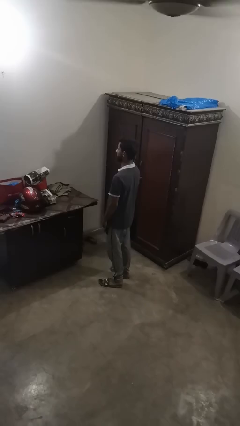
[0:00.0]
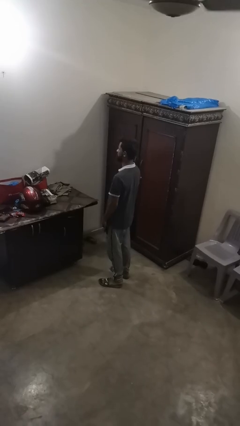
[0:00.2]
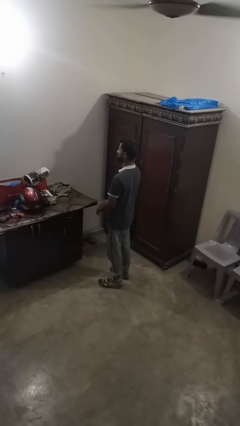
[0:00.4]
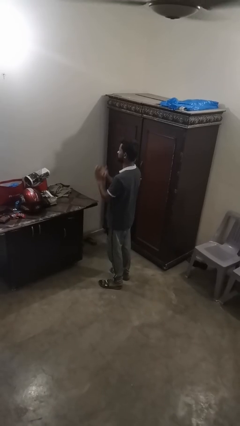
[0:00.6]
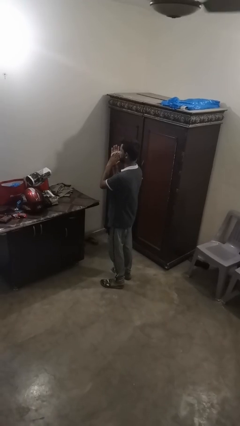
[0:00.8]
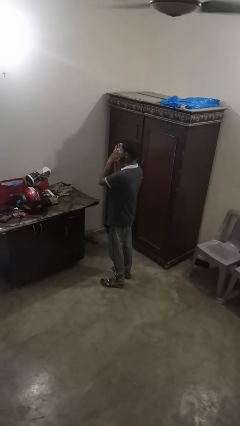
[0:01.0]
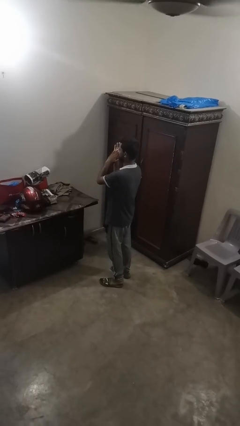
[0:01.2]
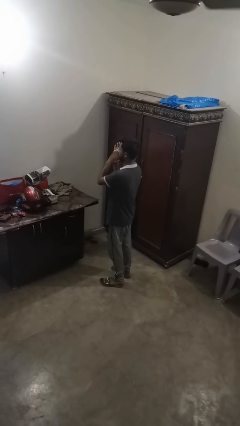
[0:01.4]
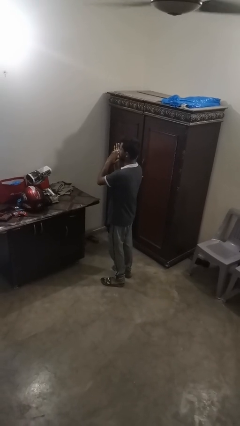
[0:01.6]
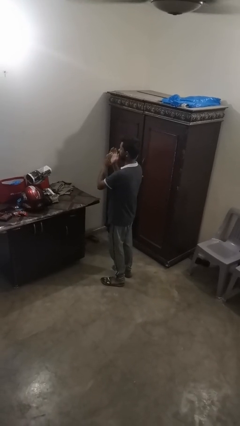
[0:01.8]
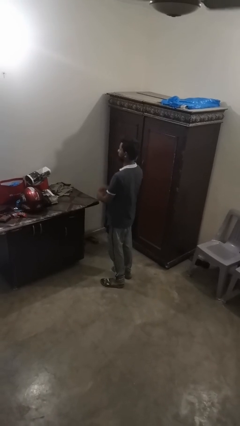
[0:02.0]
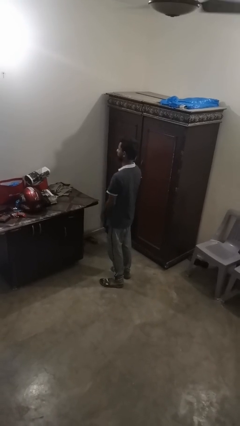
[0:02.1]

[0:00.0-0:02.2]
person claps hands

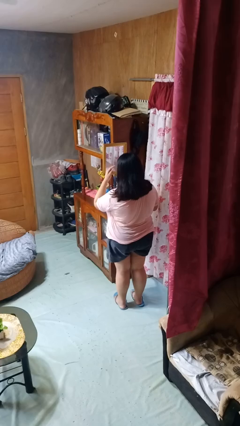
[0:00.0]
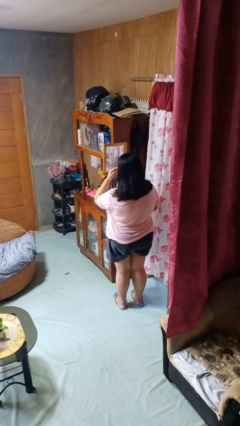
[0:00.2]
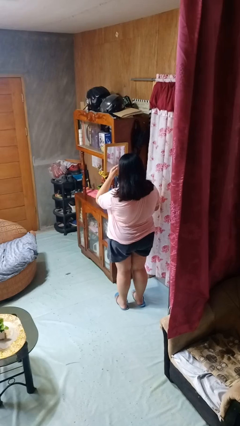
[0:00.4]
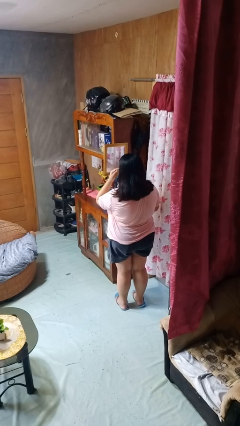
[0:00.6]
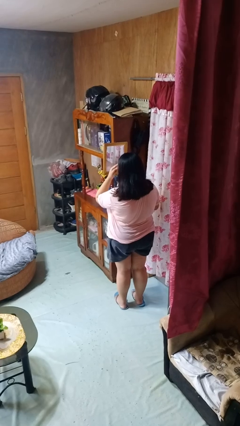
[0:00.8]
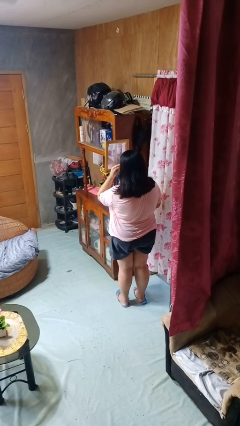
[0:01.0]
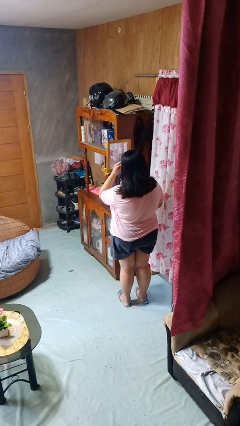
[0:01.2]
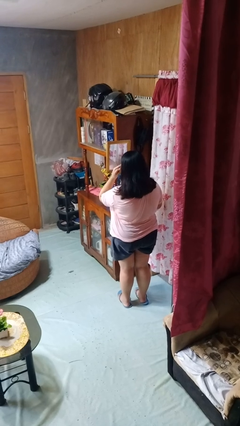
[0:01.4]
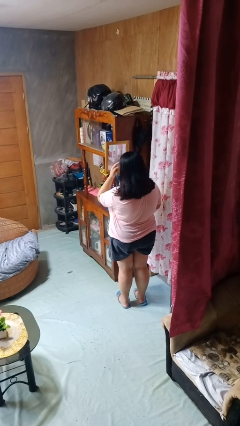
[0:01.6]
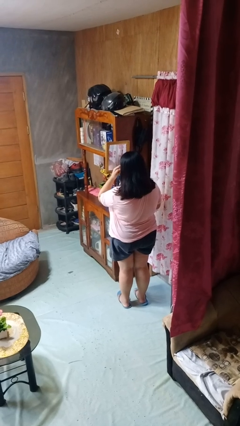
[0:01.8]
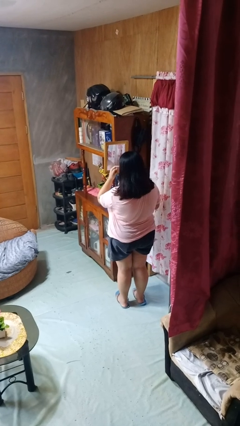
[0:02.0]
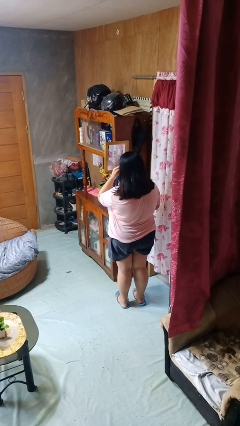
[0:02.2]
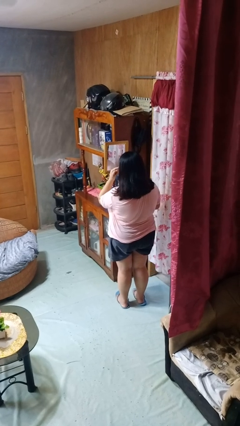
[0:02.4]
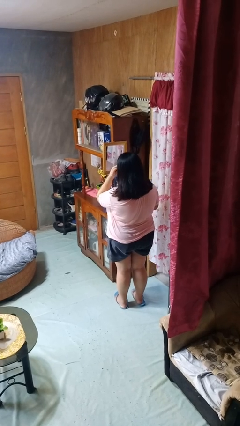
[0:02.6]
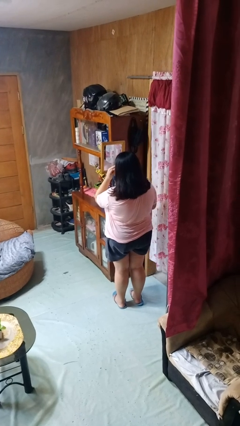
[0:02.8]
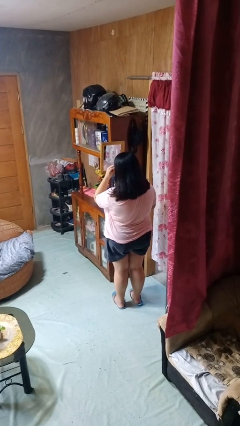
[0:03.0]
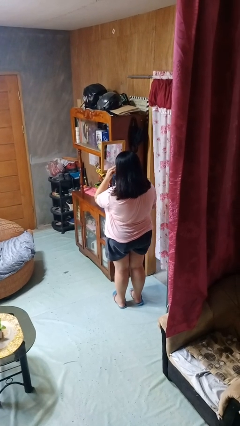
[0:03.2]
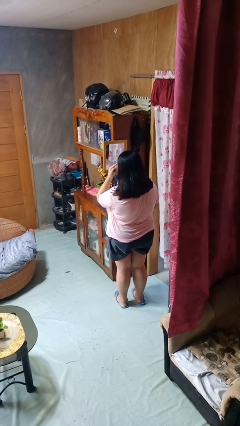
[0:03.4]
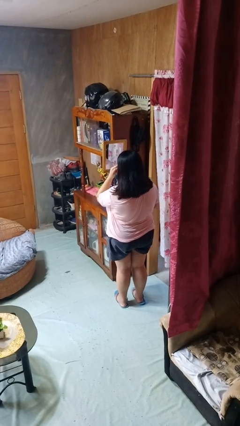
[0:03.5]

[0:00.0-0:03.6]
person applies eye makeup

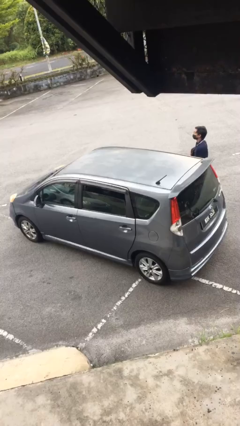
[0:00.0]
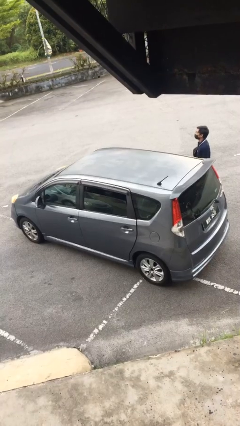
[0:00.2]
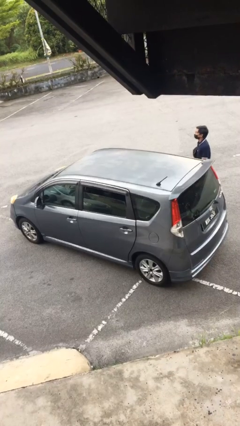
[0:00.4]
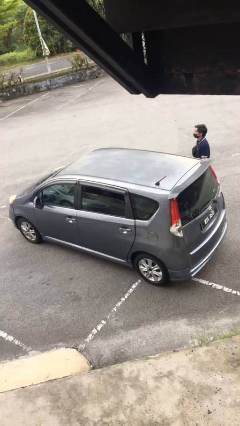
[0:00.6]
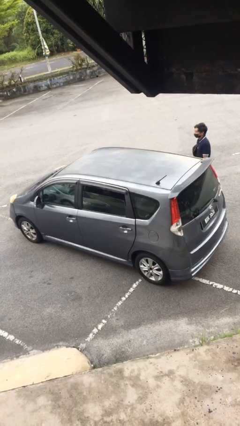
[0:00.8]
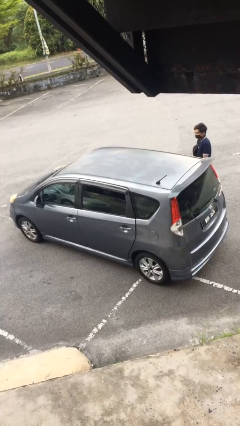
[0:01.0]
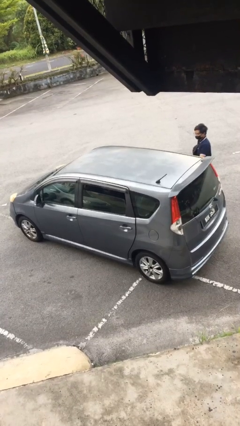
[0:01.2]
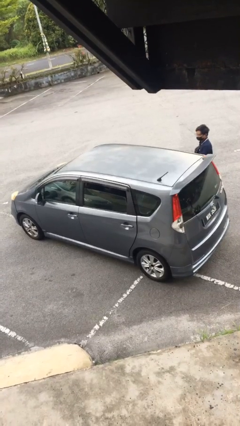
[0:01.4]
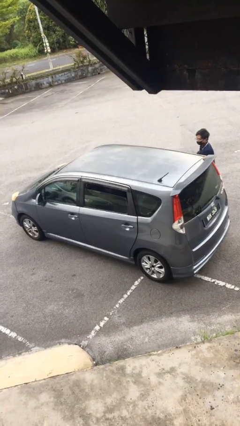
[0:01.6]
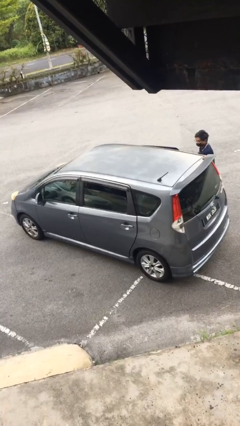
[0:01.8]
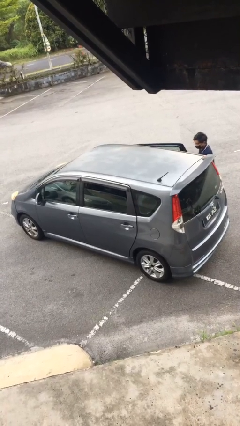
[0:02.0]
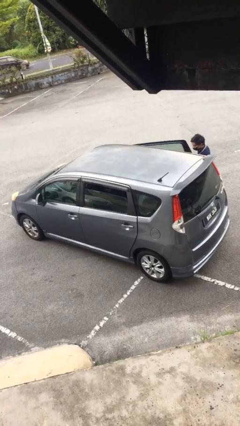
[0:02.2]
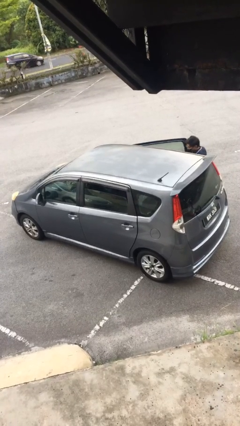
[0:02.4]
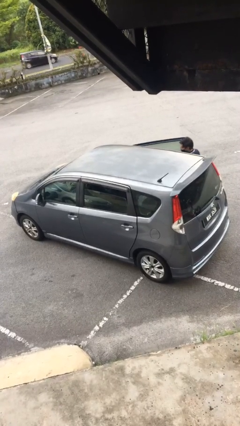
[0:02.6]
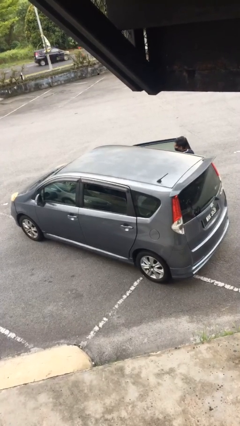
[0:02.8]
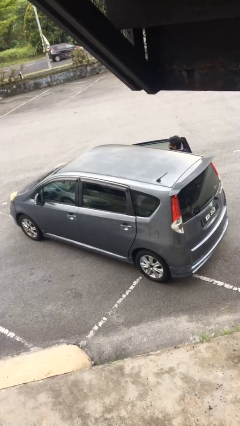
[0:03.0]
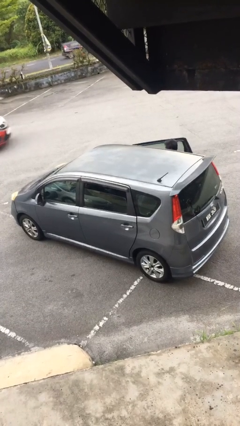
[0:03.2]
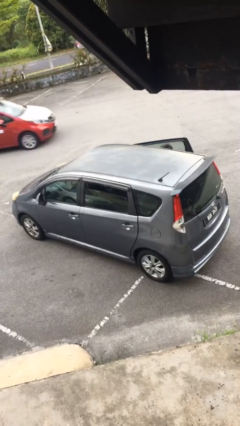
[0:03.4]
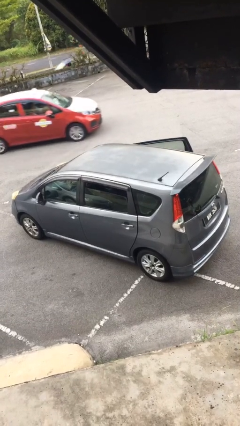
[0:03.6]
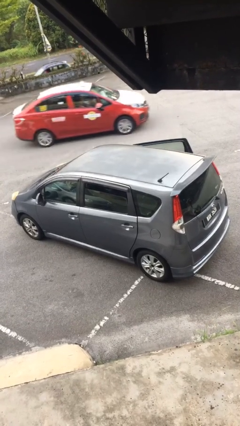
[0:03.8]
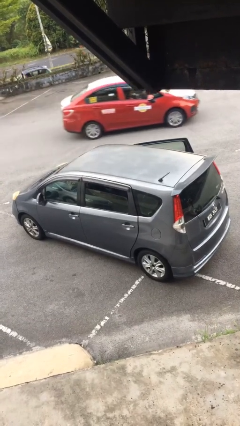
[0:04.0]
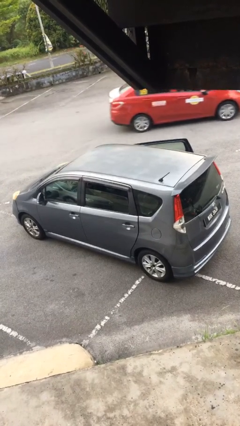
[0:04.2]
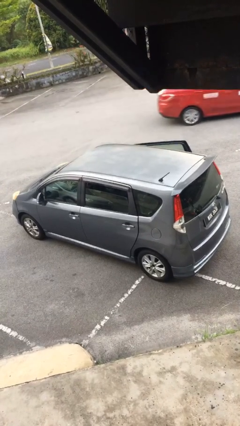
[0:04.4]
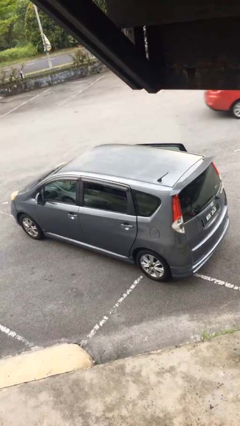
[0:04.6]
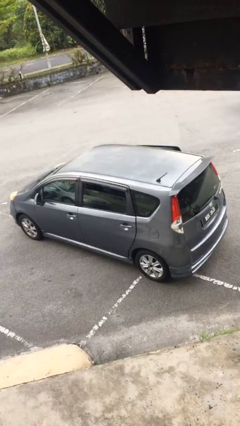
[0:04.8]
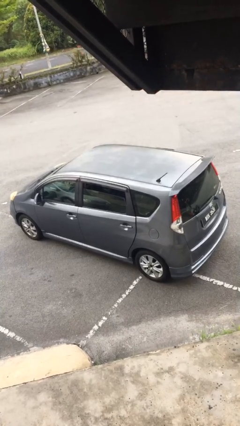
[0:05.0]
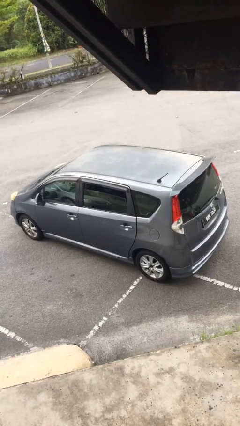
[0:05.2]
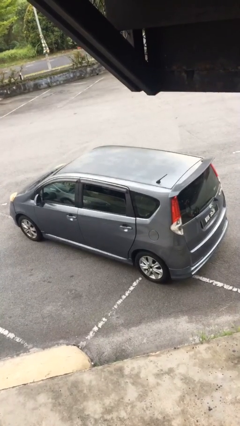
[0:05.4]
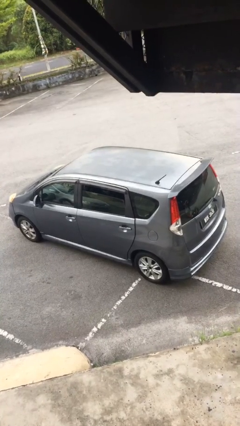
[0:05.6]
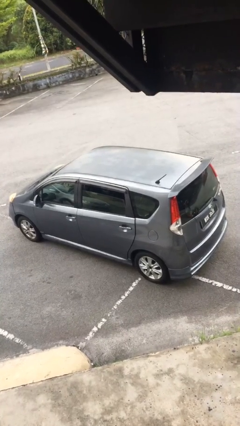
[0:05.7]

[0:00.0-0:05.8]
car picks up person

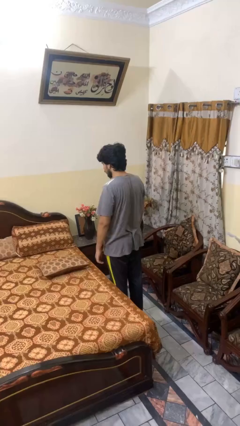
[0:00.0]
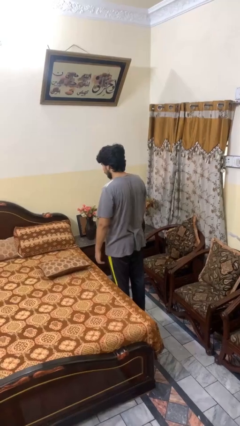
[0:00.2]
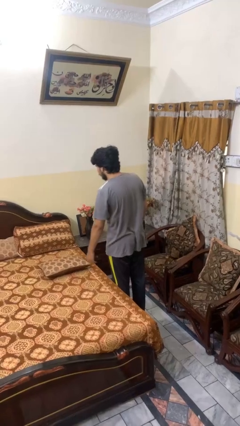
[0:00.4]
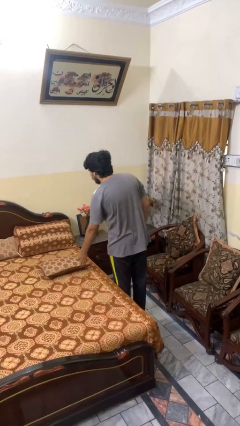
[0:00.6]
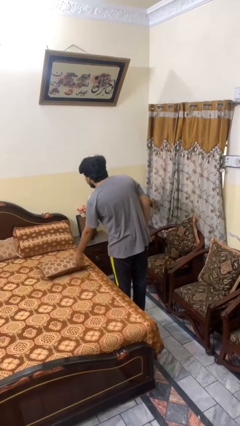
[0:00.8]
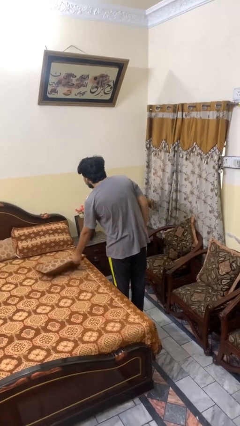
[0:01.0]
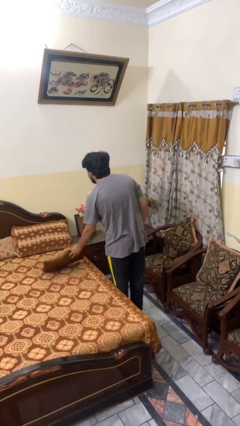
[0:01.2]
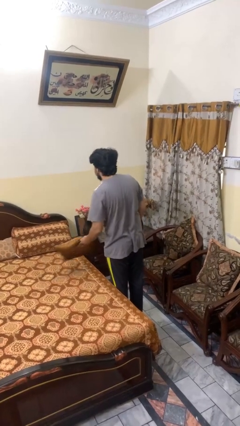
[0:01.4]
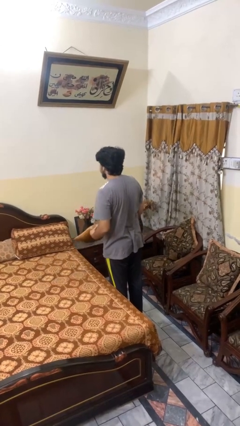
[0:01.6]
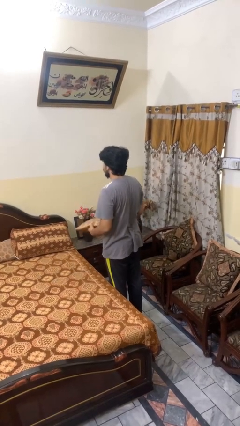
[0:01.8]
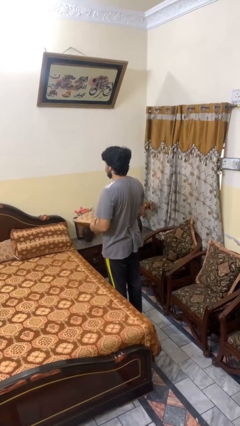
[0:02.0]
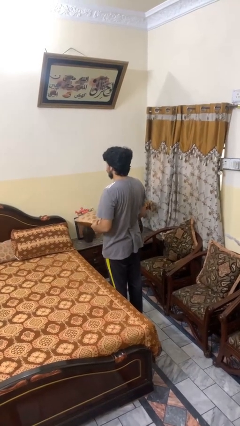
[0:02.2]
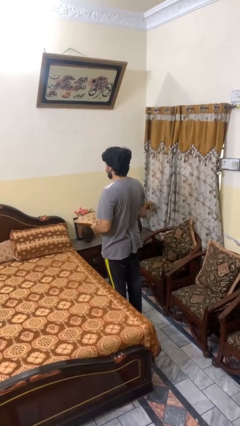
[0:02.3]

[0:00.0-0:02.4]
person picks up object from bed

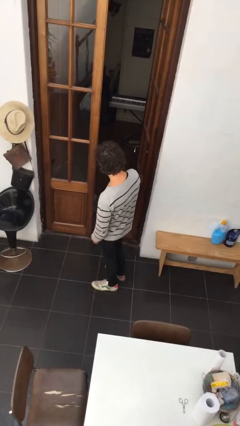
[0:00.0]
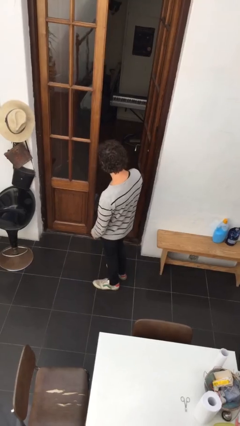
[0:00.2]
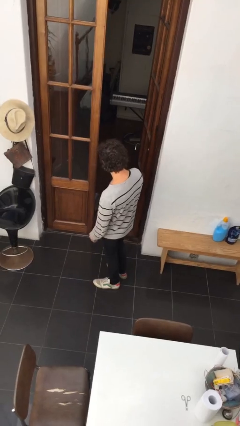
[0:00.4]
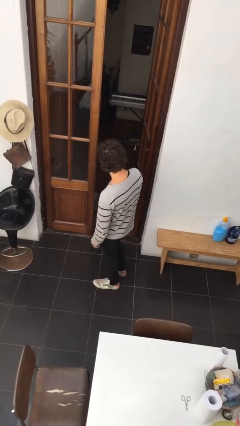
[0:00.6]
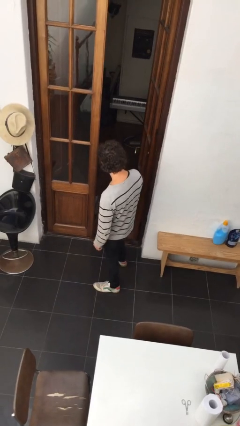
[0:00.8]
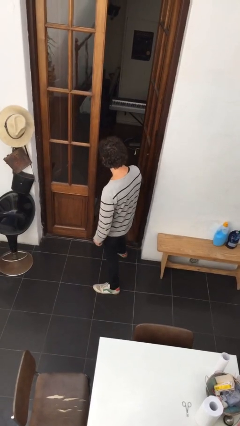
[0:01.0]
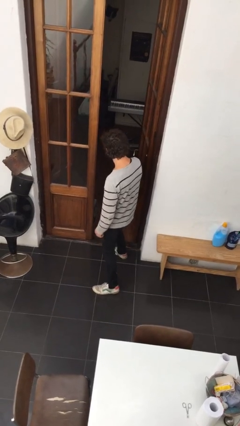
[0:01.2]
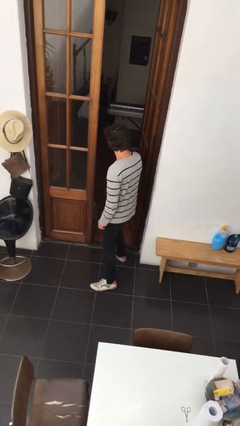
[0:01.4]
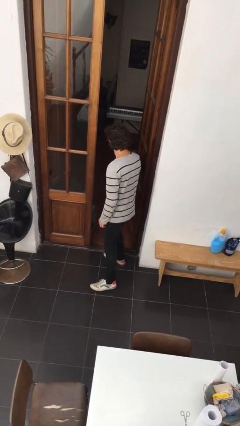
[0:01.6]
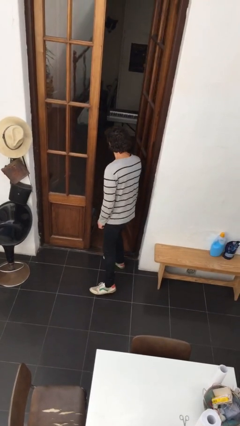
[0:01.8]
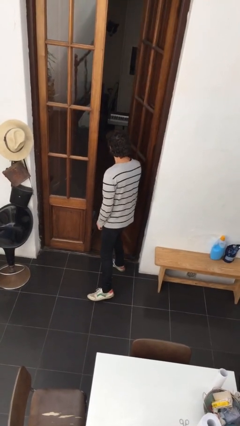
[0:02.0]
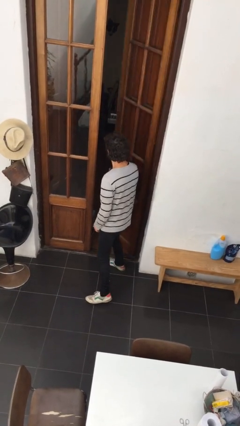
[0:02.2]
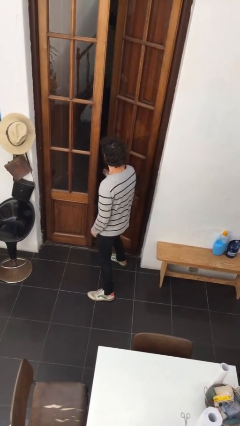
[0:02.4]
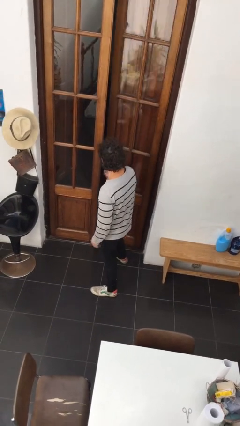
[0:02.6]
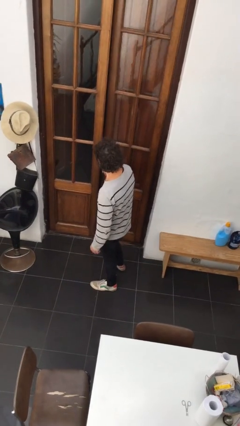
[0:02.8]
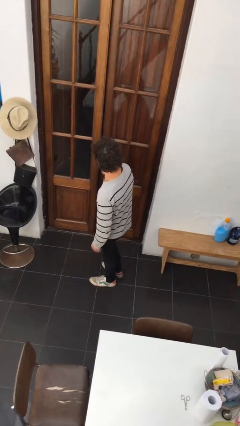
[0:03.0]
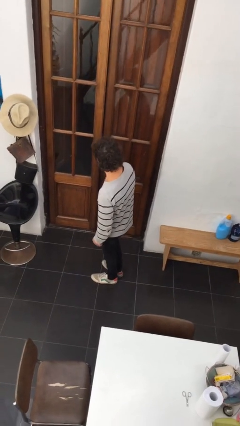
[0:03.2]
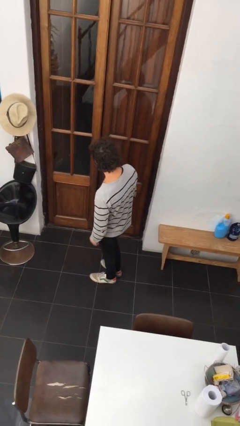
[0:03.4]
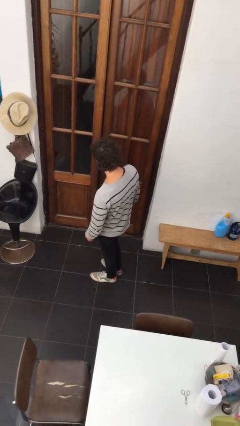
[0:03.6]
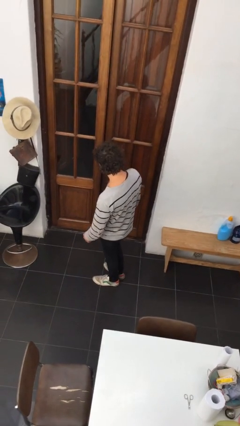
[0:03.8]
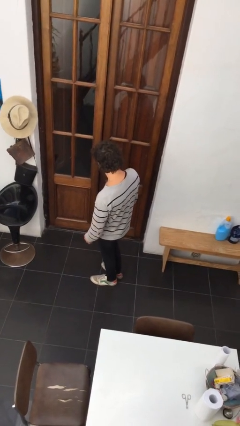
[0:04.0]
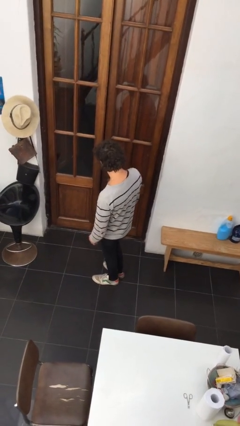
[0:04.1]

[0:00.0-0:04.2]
person closes facility door
